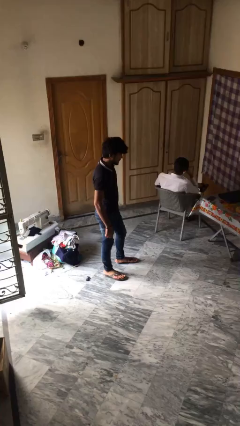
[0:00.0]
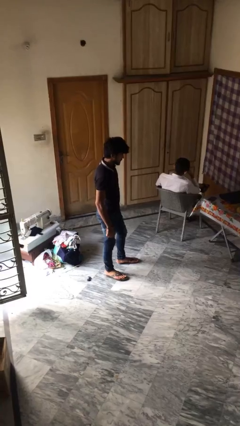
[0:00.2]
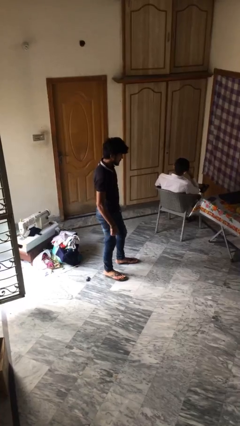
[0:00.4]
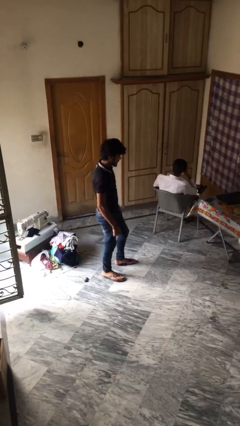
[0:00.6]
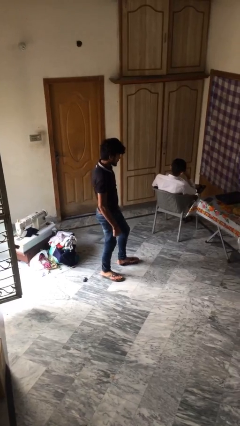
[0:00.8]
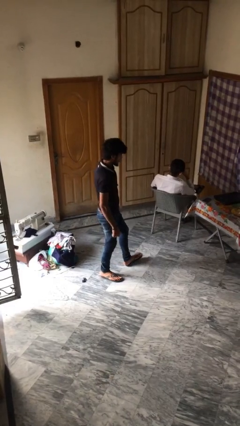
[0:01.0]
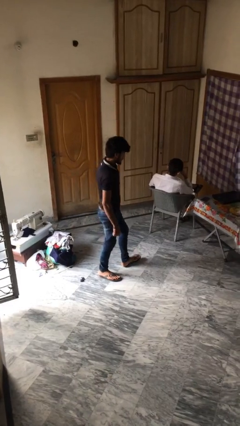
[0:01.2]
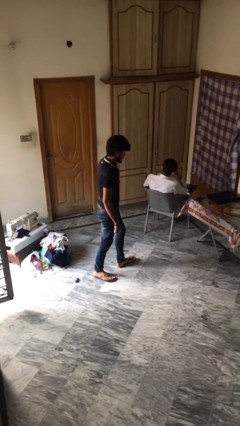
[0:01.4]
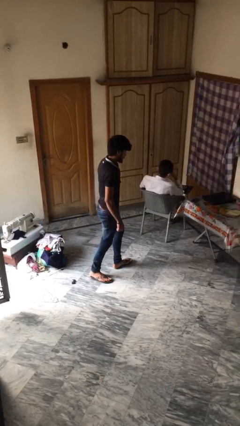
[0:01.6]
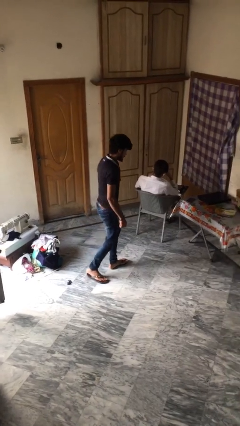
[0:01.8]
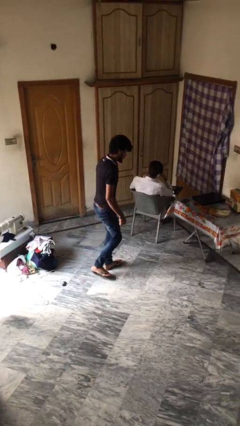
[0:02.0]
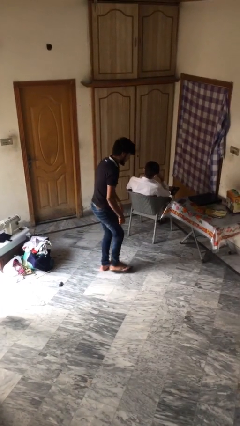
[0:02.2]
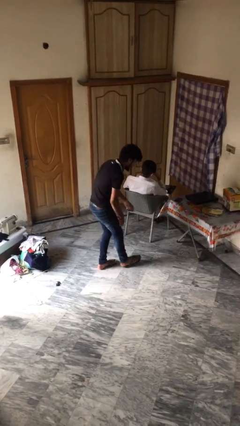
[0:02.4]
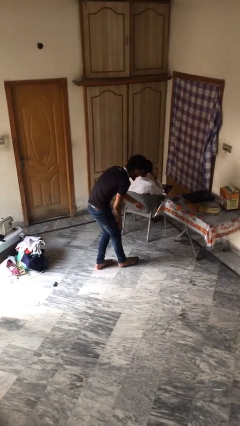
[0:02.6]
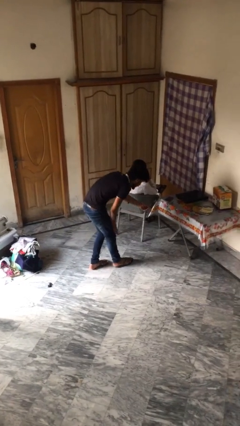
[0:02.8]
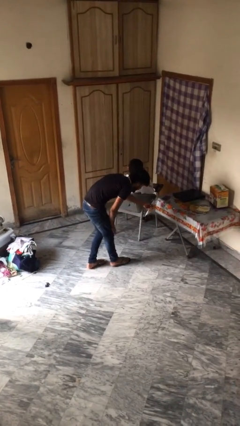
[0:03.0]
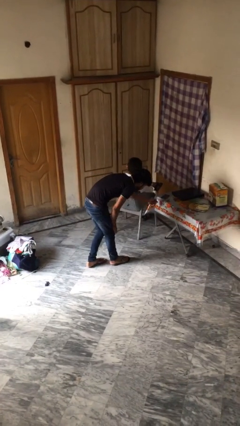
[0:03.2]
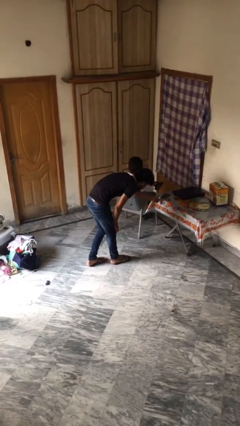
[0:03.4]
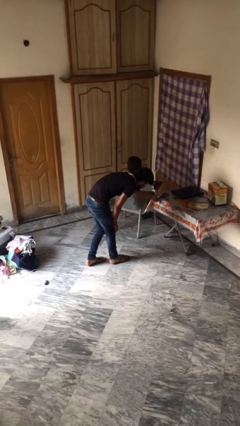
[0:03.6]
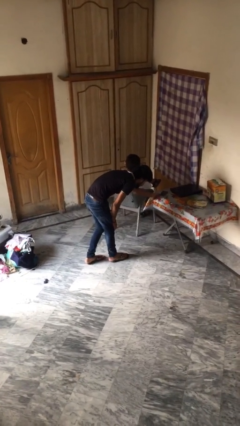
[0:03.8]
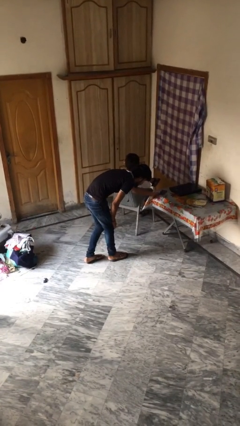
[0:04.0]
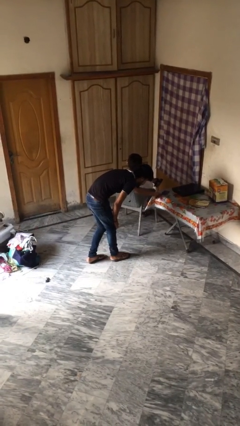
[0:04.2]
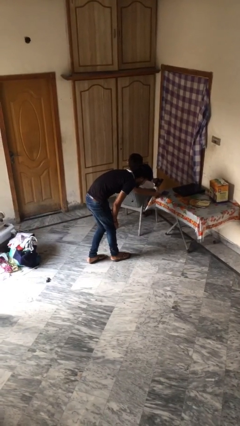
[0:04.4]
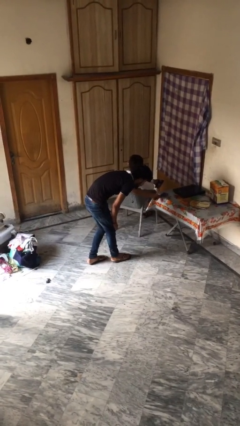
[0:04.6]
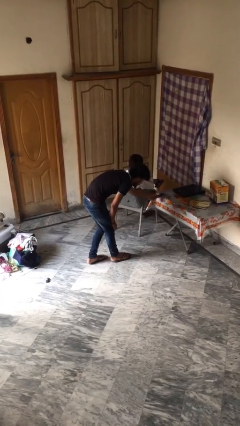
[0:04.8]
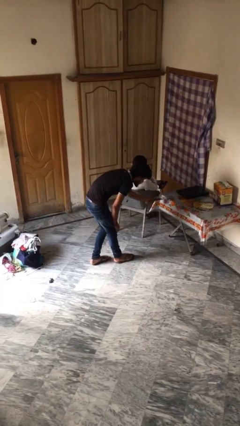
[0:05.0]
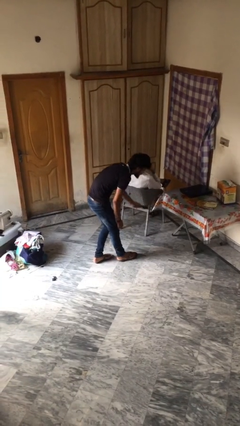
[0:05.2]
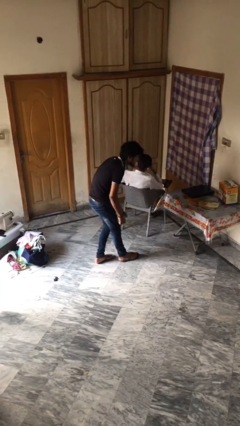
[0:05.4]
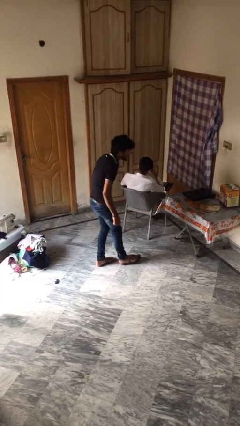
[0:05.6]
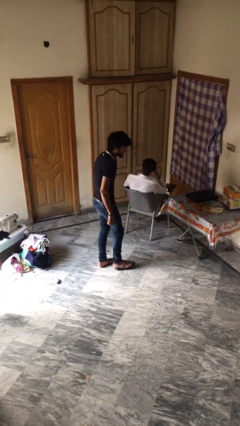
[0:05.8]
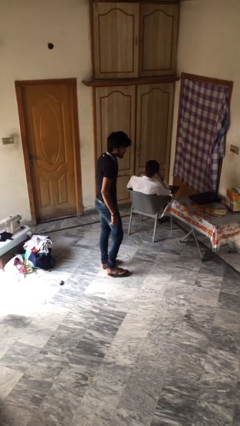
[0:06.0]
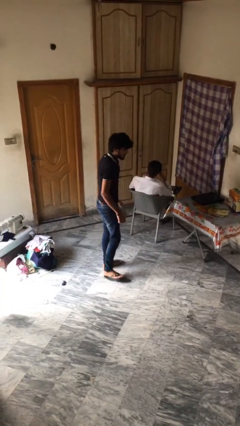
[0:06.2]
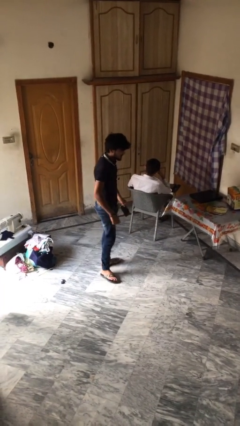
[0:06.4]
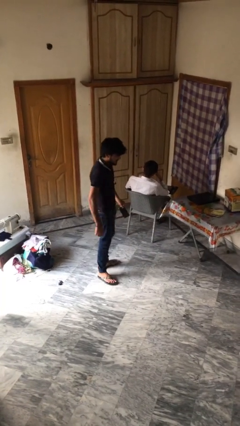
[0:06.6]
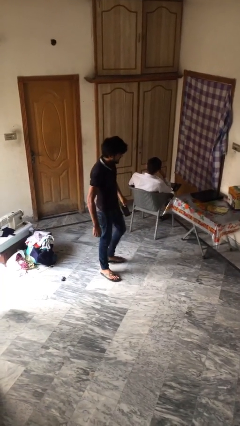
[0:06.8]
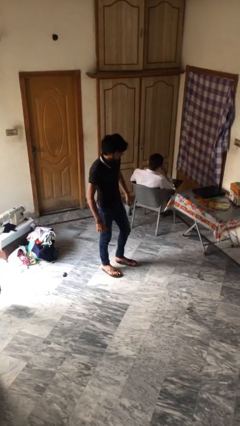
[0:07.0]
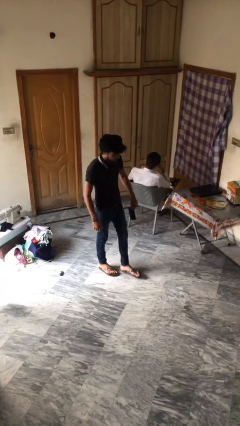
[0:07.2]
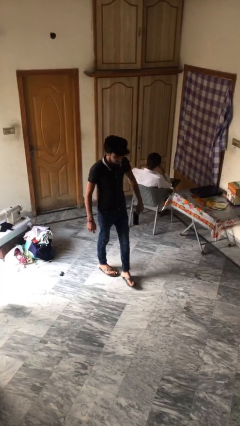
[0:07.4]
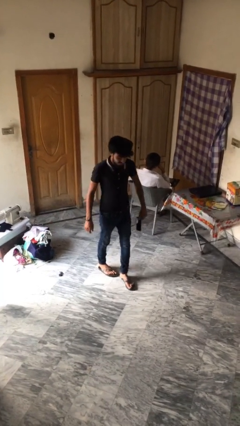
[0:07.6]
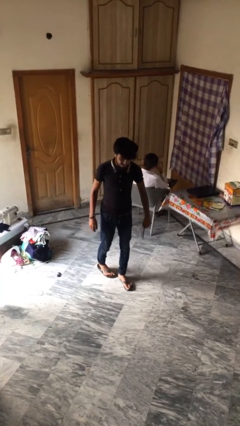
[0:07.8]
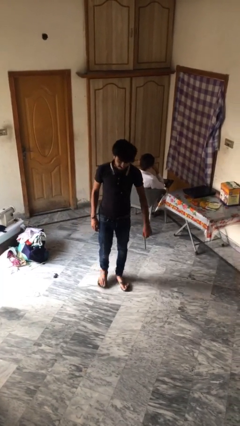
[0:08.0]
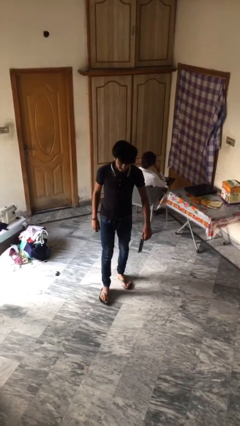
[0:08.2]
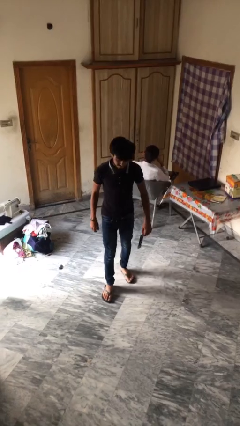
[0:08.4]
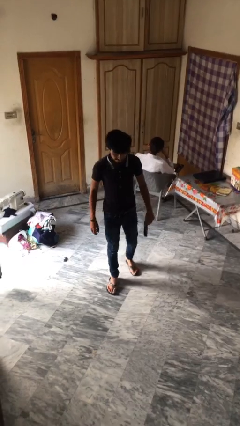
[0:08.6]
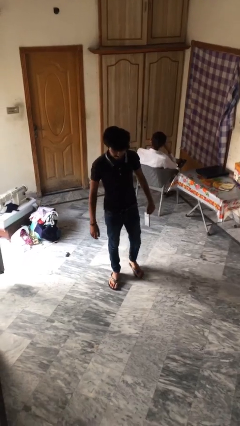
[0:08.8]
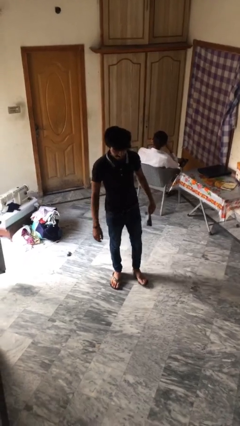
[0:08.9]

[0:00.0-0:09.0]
person steals object from person

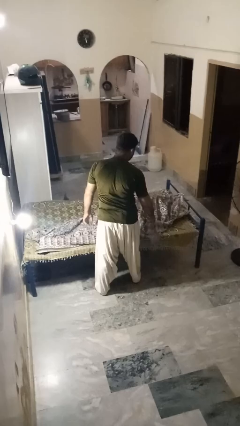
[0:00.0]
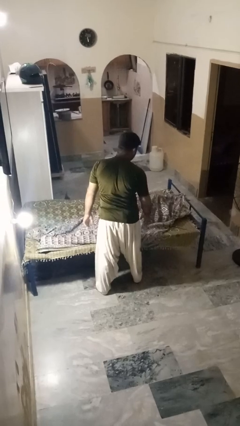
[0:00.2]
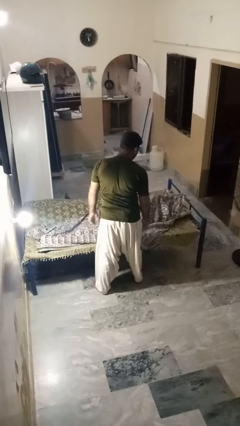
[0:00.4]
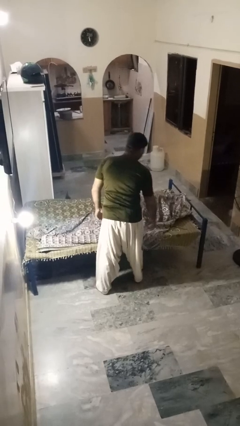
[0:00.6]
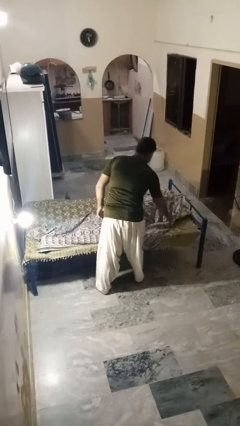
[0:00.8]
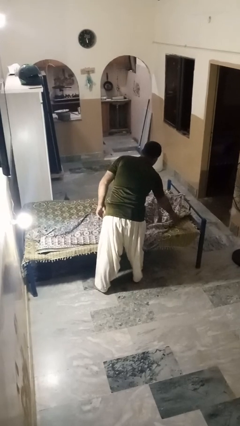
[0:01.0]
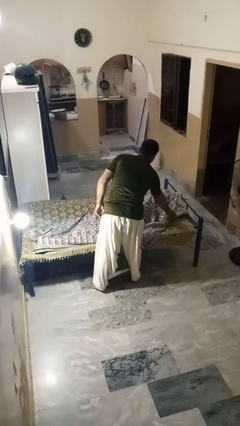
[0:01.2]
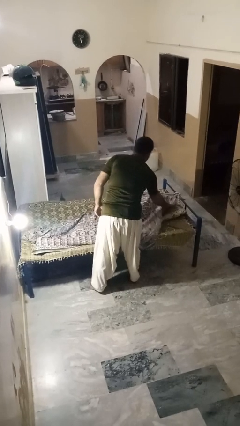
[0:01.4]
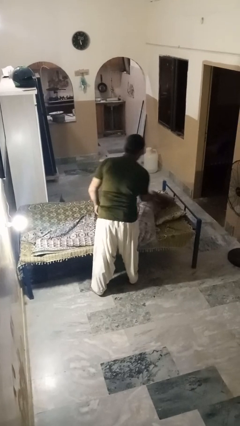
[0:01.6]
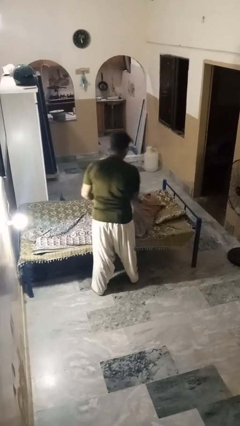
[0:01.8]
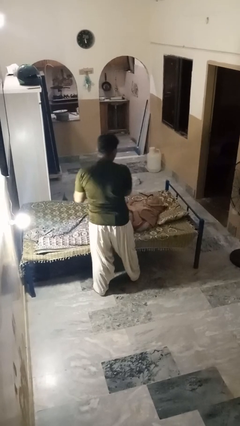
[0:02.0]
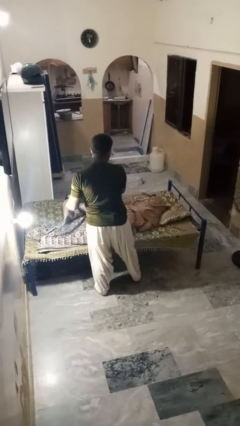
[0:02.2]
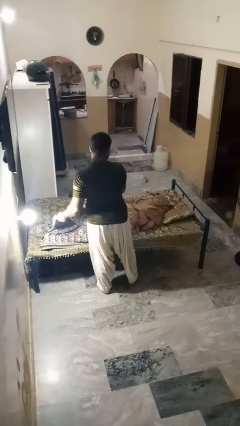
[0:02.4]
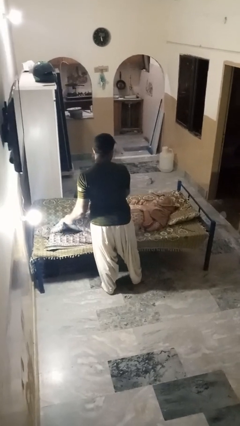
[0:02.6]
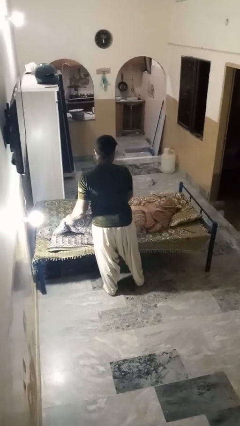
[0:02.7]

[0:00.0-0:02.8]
person uncovers friend with blanket

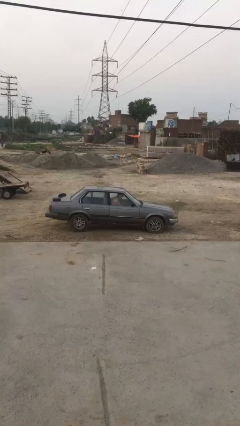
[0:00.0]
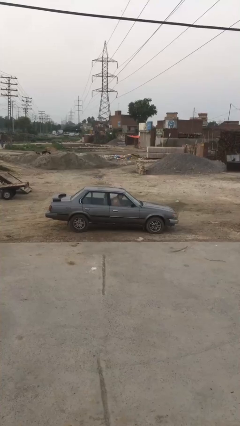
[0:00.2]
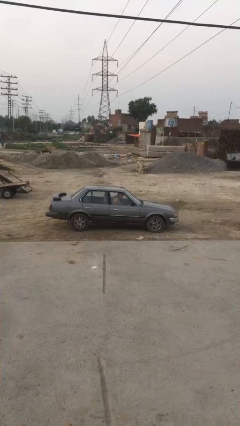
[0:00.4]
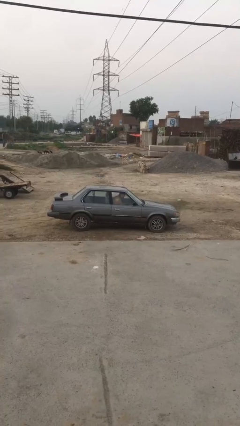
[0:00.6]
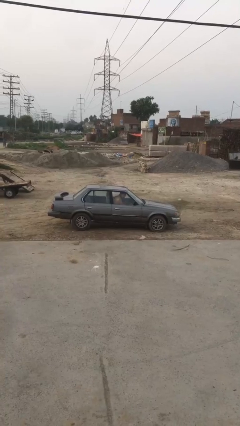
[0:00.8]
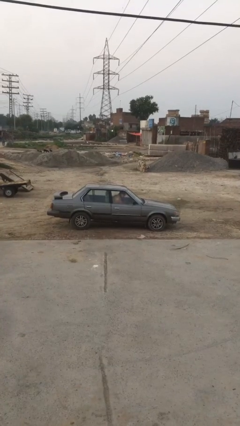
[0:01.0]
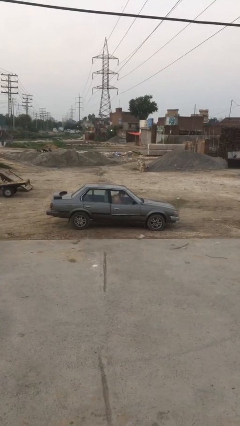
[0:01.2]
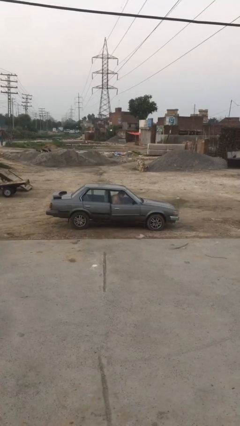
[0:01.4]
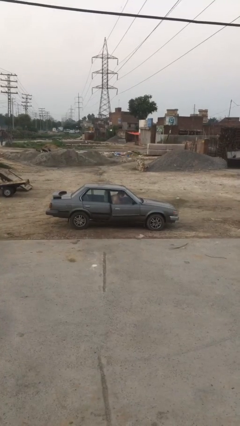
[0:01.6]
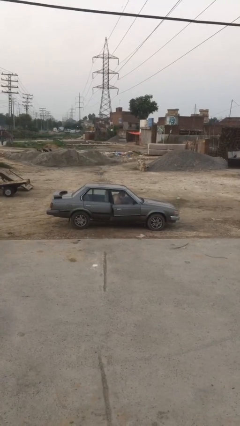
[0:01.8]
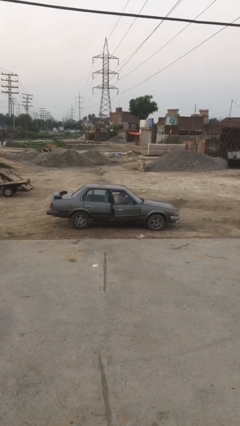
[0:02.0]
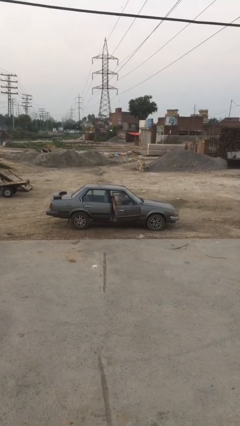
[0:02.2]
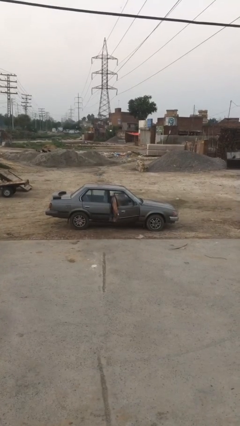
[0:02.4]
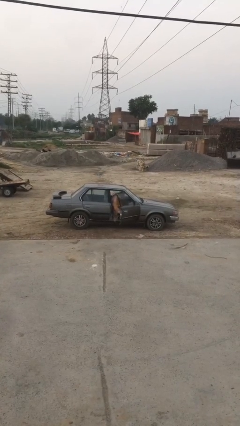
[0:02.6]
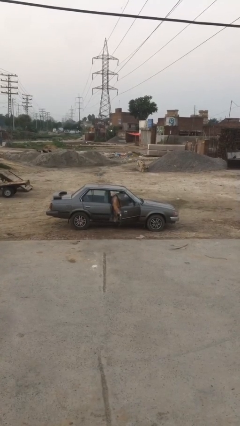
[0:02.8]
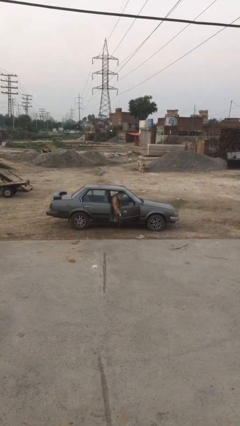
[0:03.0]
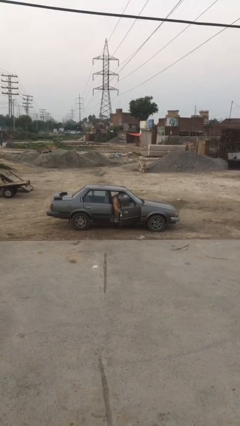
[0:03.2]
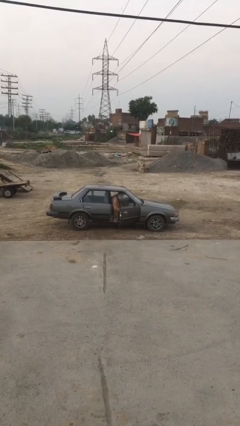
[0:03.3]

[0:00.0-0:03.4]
person opens car door

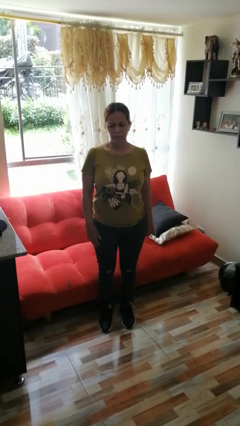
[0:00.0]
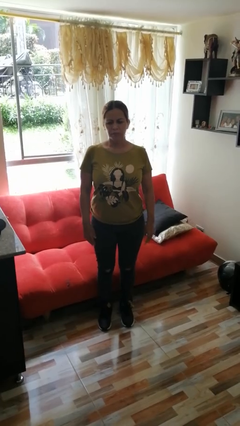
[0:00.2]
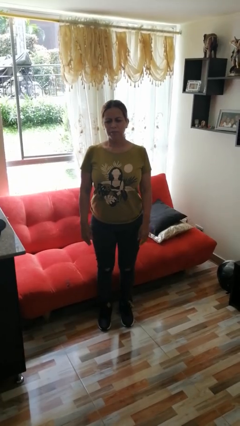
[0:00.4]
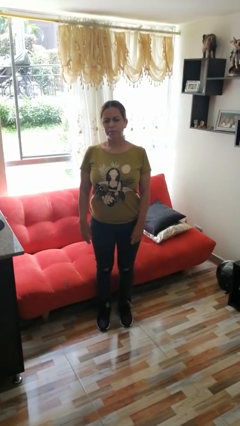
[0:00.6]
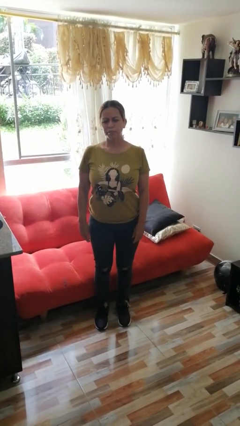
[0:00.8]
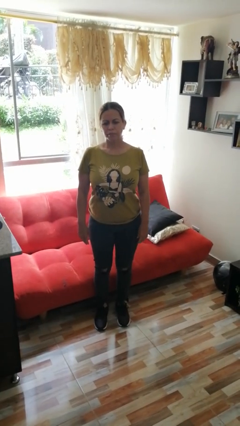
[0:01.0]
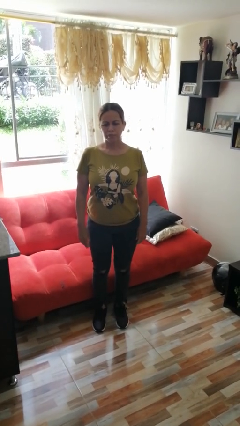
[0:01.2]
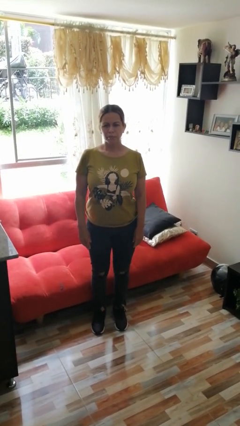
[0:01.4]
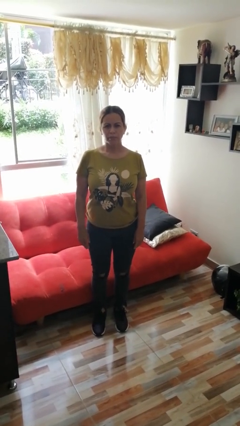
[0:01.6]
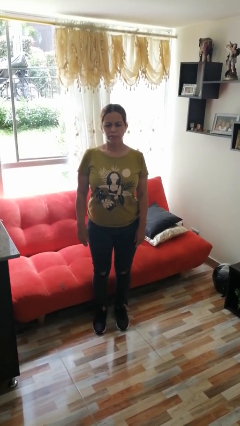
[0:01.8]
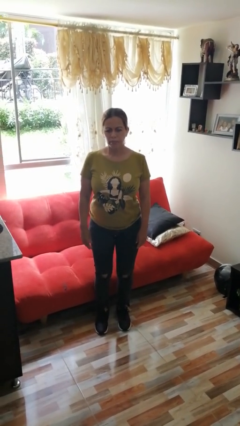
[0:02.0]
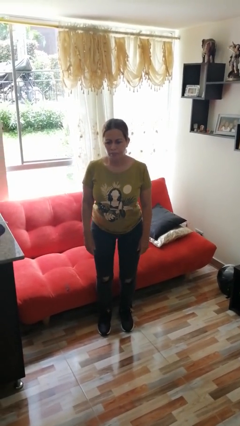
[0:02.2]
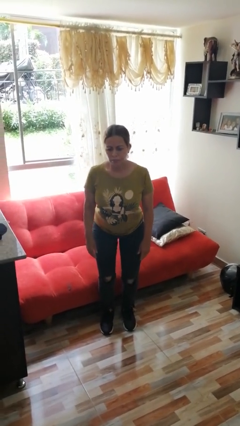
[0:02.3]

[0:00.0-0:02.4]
person stands up

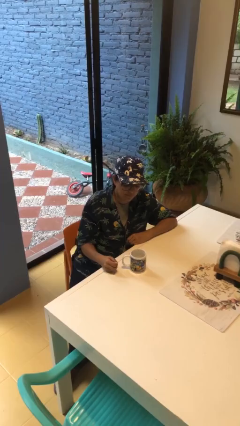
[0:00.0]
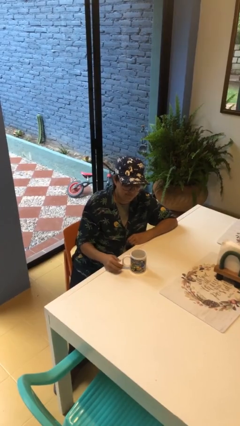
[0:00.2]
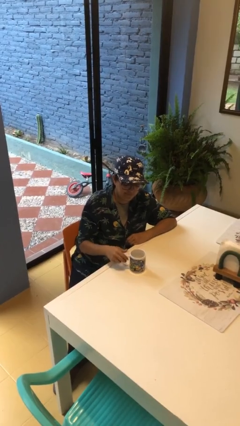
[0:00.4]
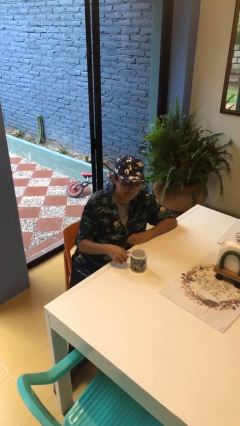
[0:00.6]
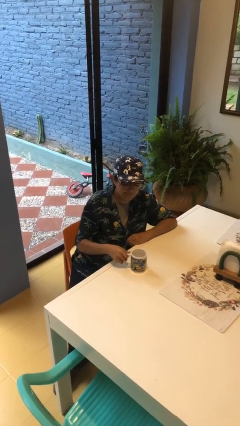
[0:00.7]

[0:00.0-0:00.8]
person picks up object from table
